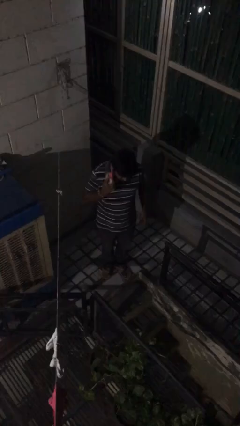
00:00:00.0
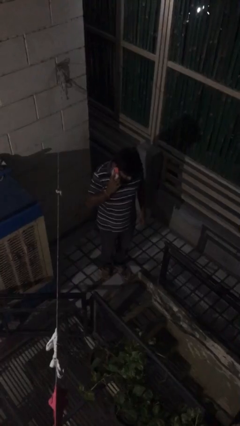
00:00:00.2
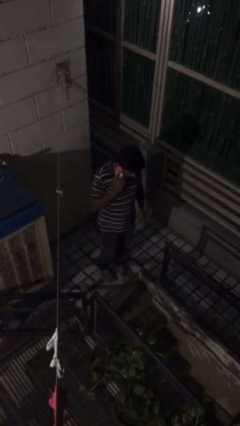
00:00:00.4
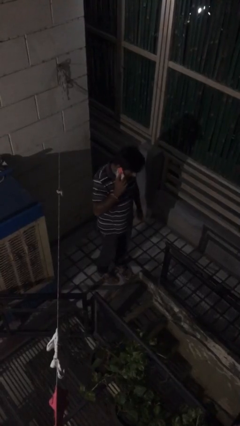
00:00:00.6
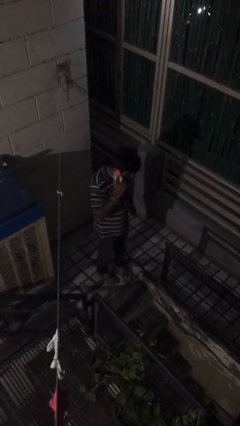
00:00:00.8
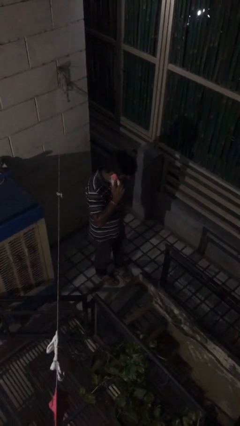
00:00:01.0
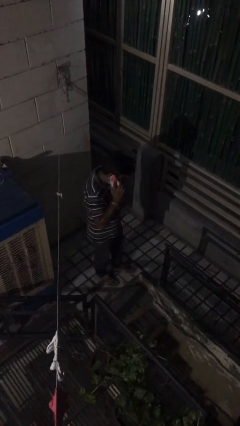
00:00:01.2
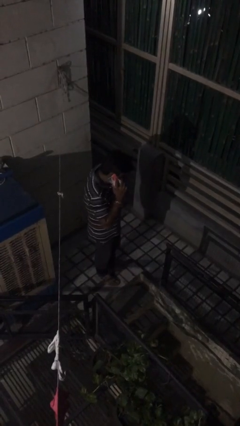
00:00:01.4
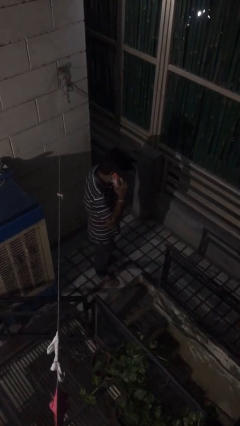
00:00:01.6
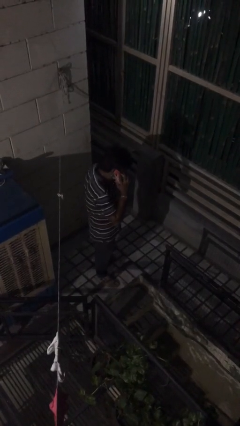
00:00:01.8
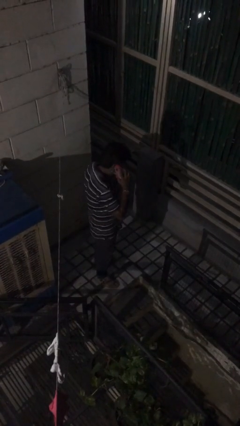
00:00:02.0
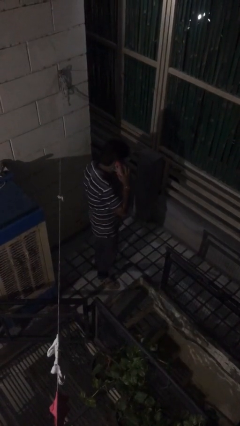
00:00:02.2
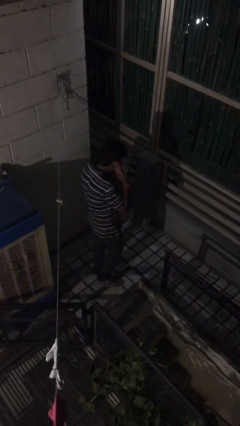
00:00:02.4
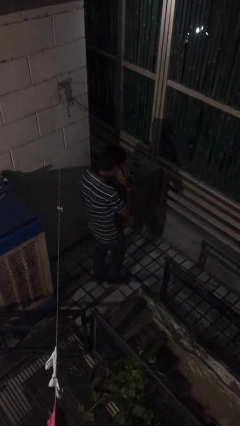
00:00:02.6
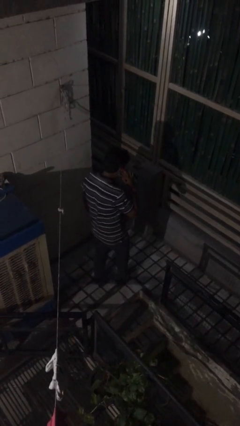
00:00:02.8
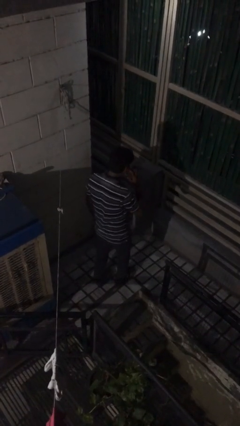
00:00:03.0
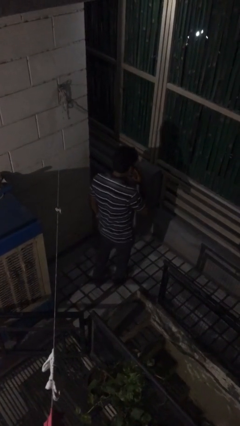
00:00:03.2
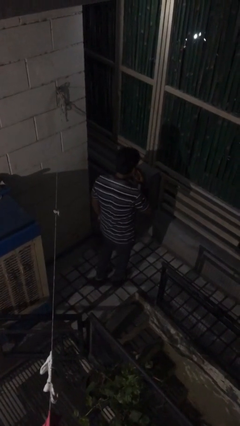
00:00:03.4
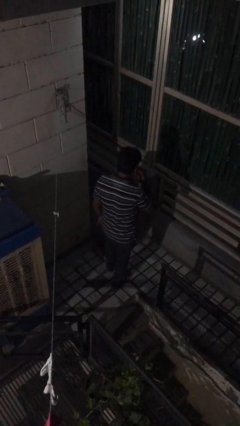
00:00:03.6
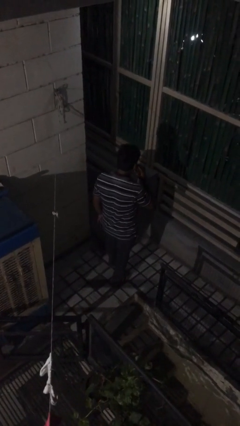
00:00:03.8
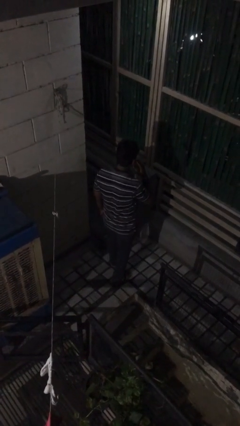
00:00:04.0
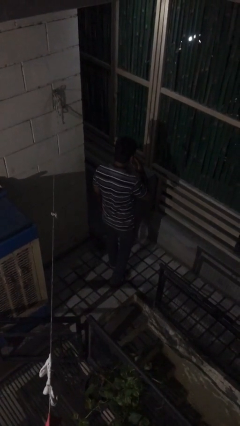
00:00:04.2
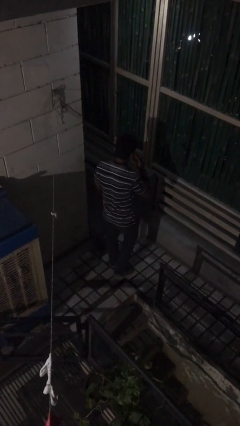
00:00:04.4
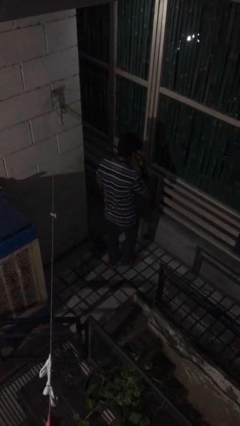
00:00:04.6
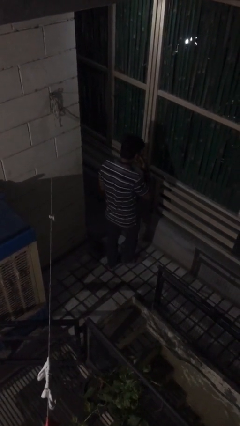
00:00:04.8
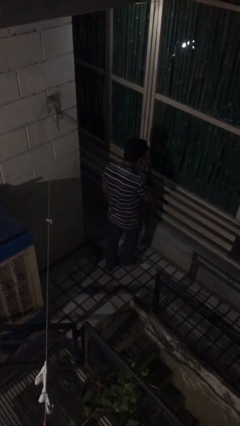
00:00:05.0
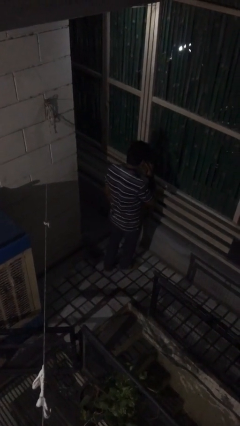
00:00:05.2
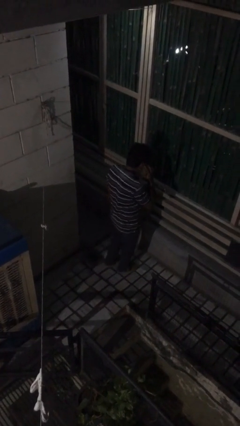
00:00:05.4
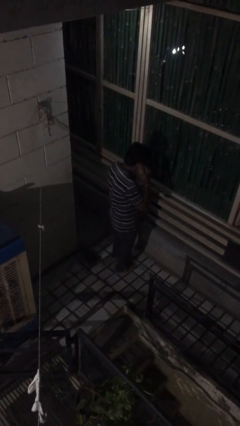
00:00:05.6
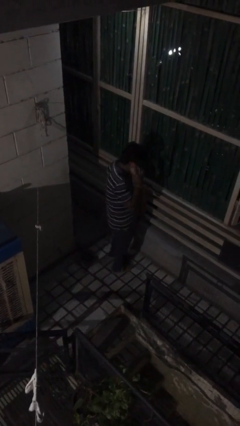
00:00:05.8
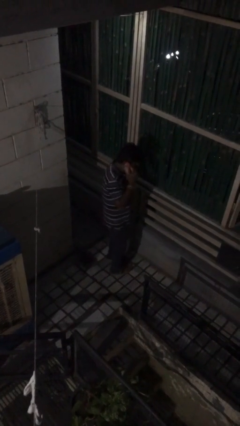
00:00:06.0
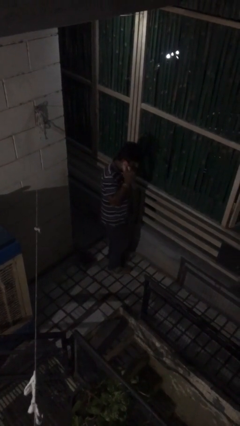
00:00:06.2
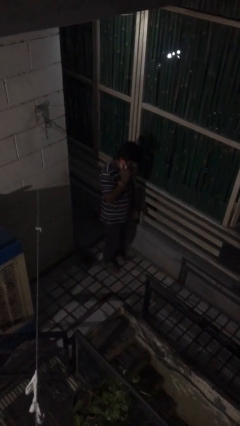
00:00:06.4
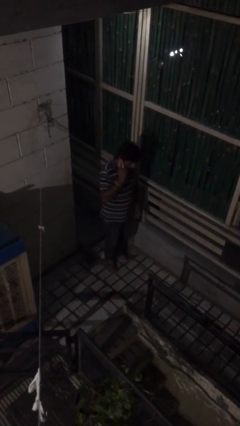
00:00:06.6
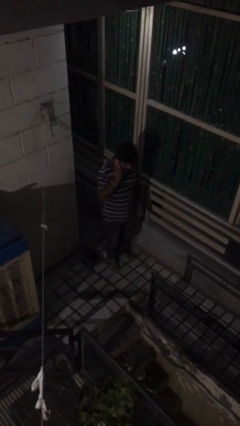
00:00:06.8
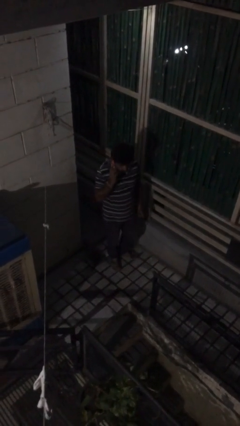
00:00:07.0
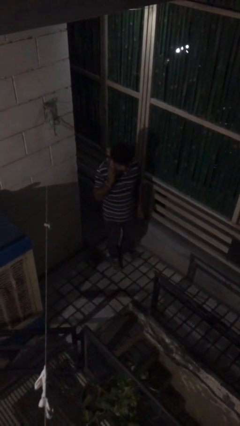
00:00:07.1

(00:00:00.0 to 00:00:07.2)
person talks on phone

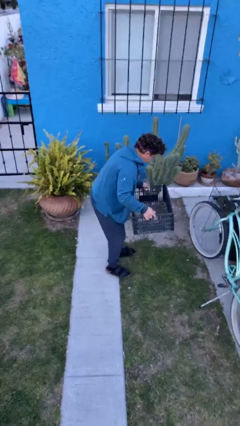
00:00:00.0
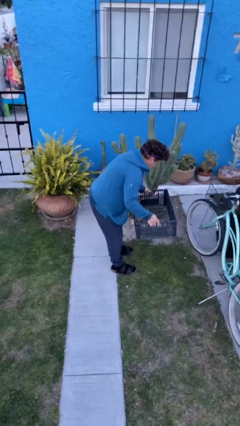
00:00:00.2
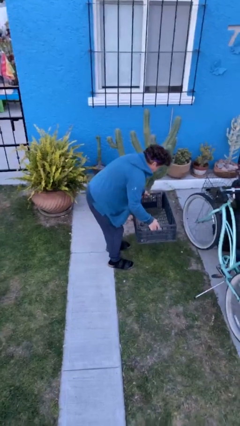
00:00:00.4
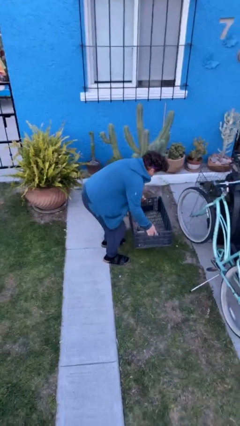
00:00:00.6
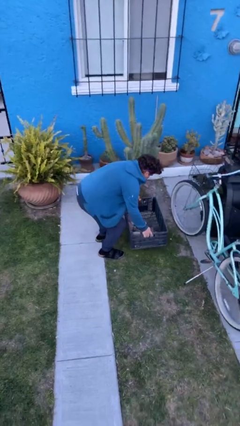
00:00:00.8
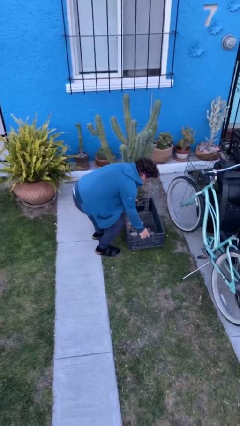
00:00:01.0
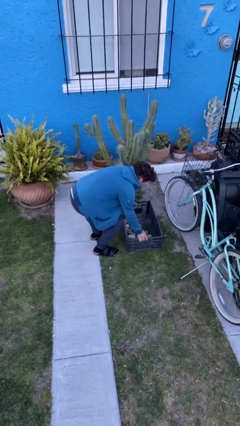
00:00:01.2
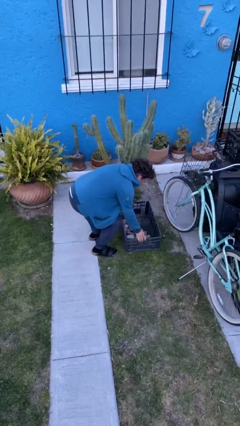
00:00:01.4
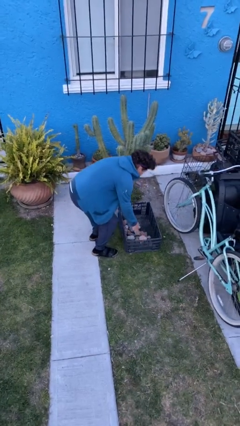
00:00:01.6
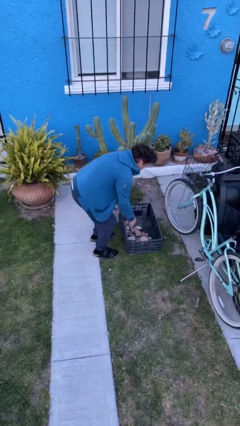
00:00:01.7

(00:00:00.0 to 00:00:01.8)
person puts down object on floor

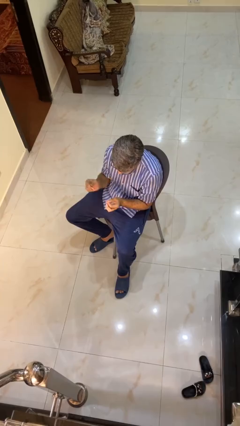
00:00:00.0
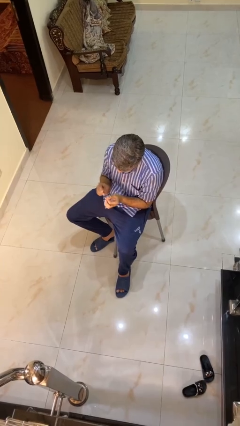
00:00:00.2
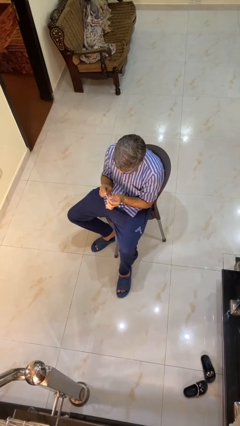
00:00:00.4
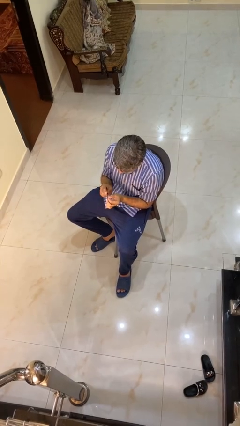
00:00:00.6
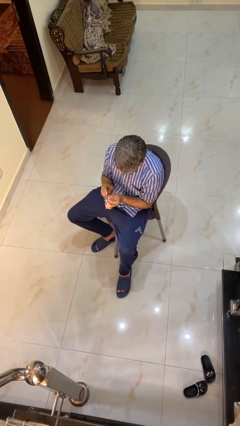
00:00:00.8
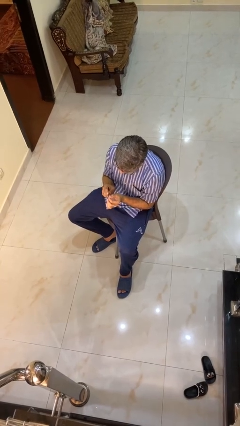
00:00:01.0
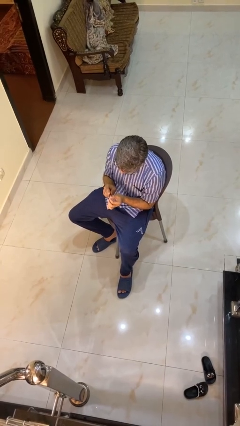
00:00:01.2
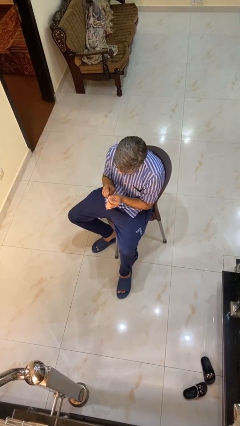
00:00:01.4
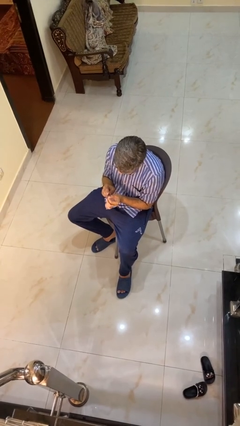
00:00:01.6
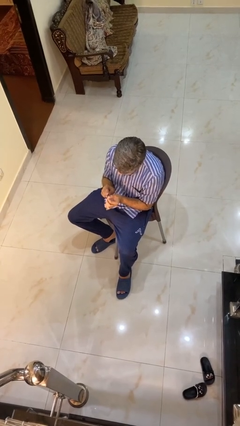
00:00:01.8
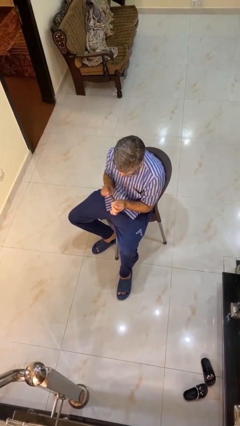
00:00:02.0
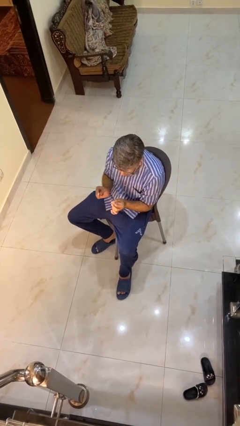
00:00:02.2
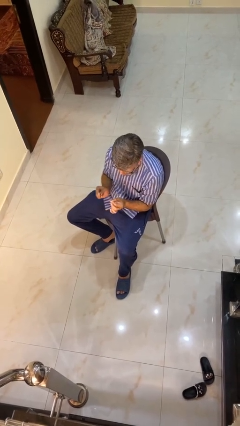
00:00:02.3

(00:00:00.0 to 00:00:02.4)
person files fingernails

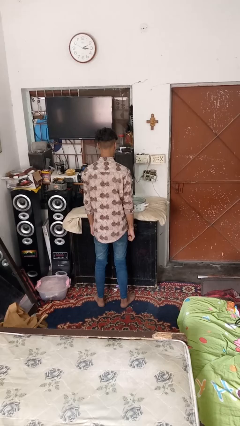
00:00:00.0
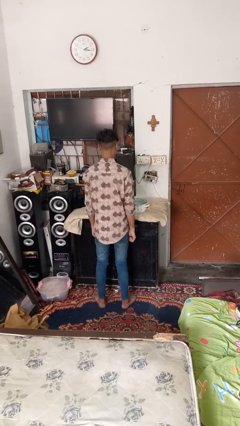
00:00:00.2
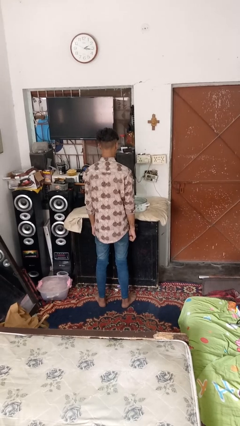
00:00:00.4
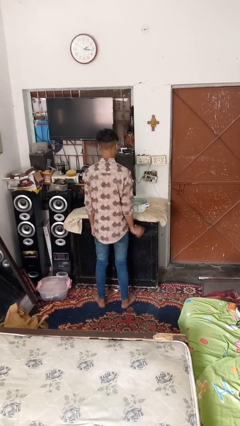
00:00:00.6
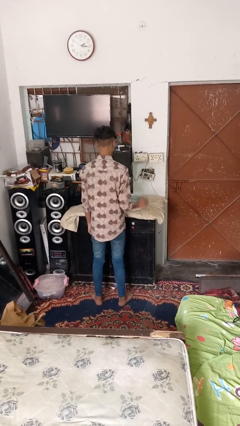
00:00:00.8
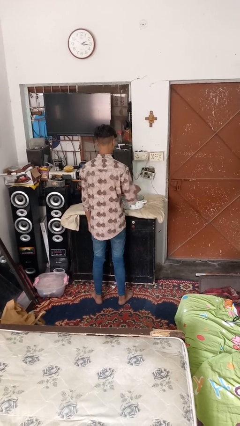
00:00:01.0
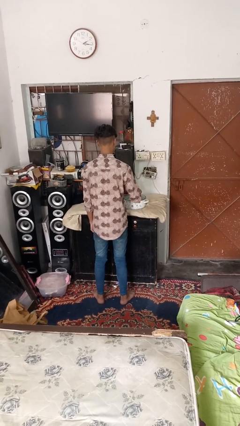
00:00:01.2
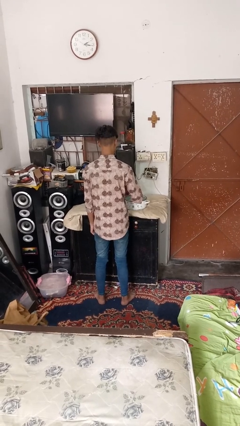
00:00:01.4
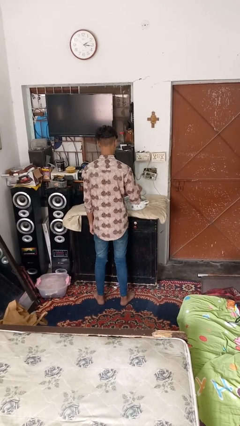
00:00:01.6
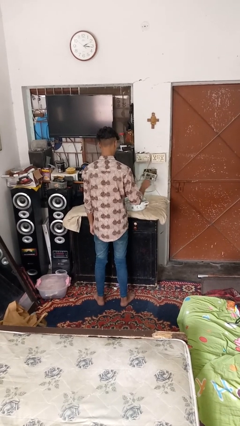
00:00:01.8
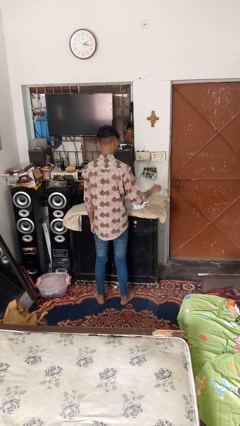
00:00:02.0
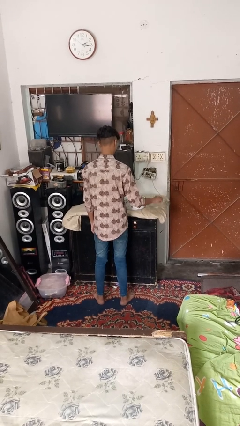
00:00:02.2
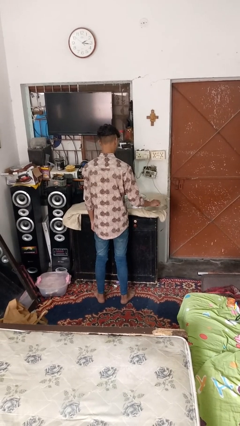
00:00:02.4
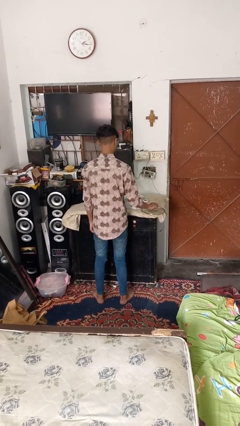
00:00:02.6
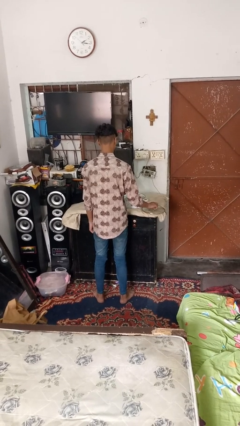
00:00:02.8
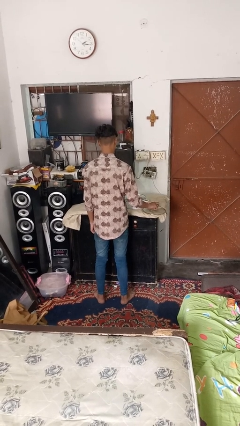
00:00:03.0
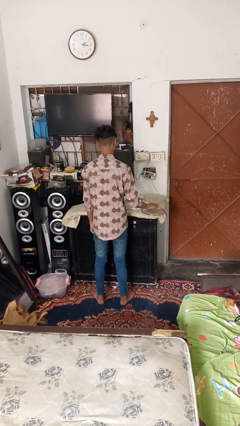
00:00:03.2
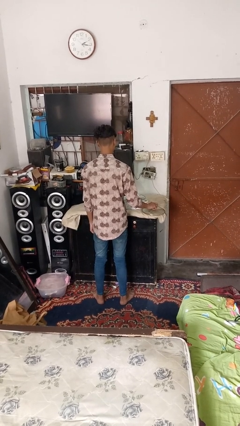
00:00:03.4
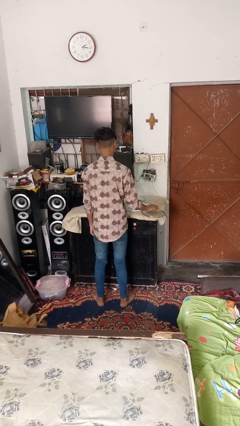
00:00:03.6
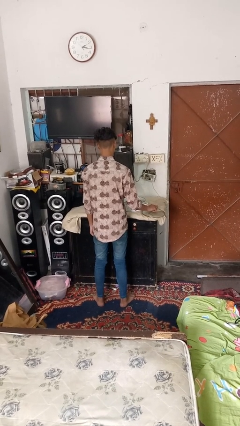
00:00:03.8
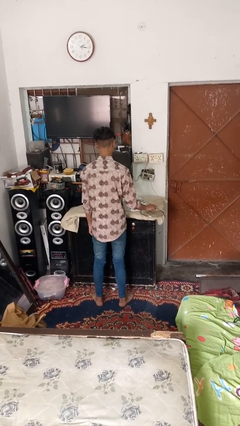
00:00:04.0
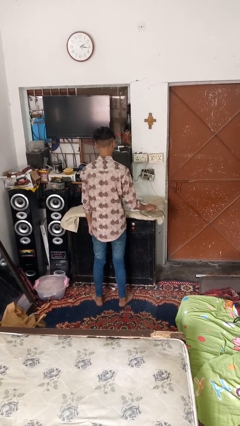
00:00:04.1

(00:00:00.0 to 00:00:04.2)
person opens jar

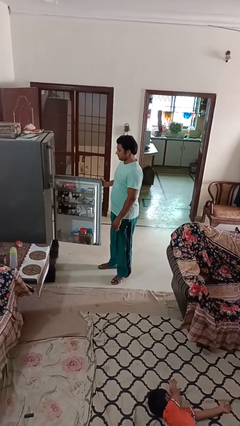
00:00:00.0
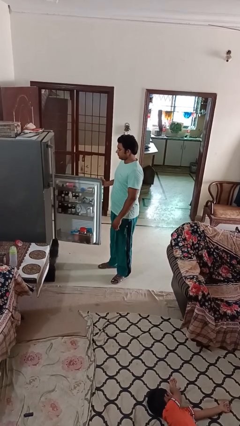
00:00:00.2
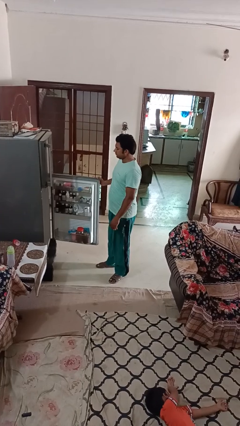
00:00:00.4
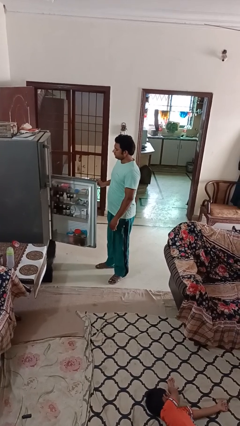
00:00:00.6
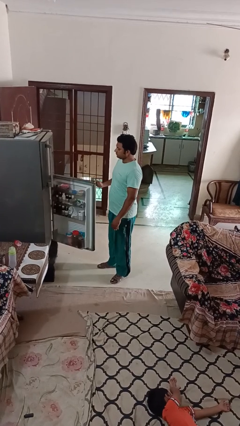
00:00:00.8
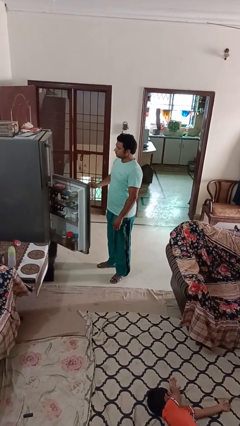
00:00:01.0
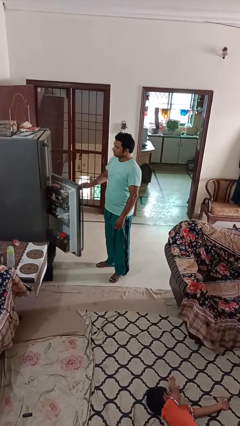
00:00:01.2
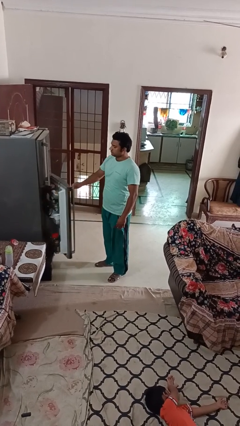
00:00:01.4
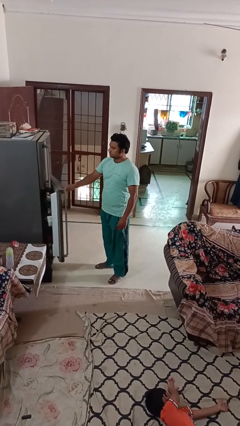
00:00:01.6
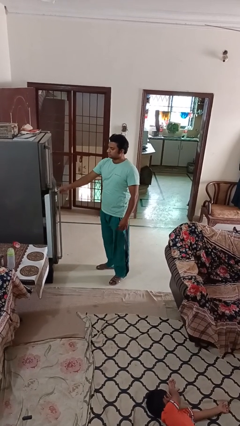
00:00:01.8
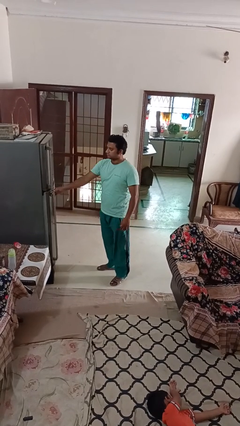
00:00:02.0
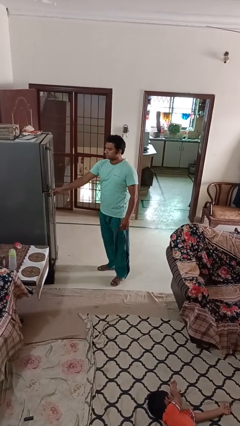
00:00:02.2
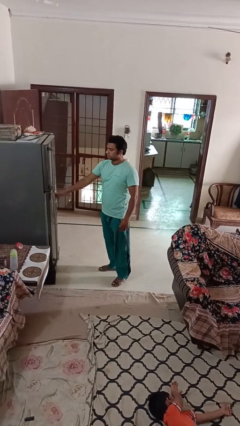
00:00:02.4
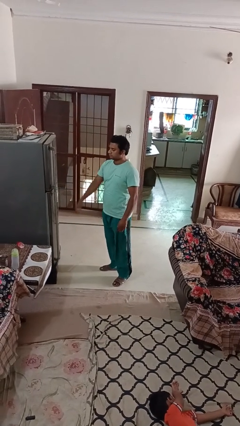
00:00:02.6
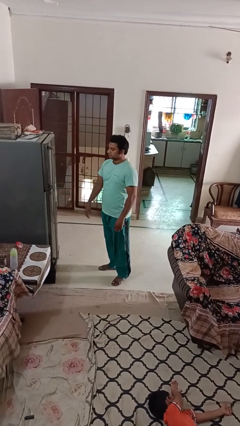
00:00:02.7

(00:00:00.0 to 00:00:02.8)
person closes refrigerator
